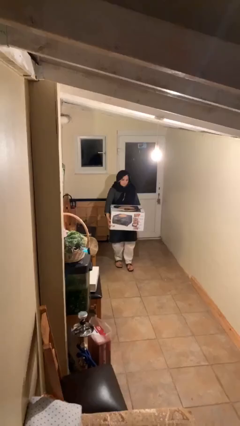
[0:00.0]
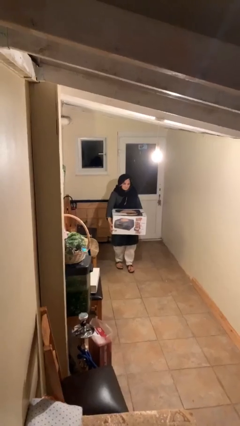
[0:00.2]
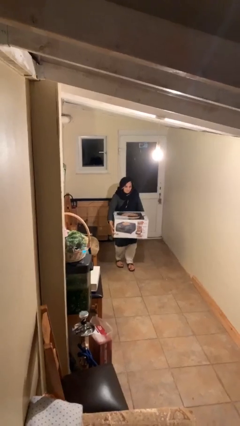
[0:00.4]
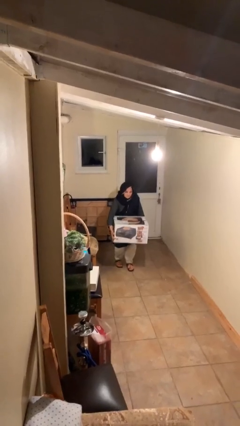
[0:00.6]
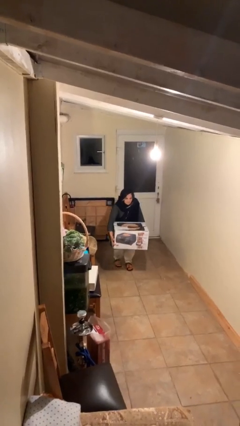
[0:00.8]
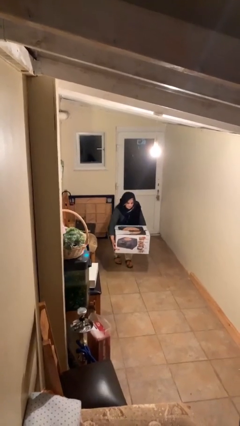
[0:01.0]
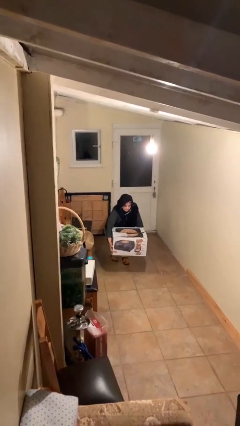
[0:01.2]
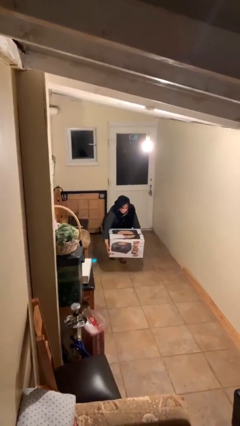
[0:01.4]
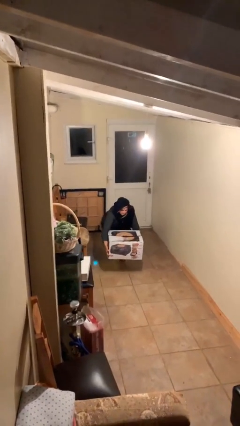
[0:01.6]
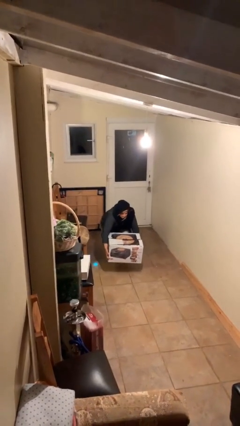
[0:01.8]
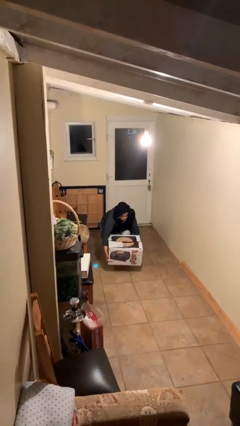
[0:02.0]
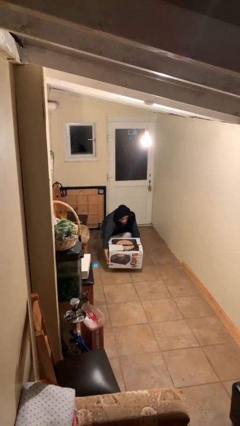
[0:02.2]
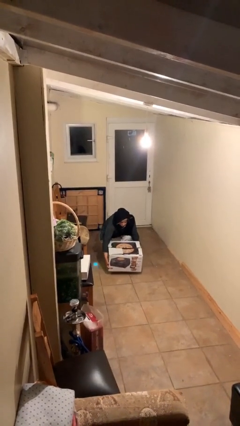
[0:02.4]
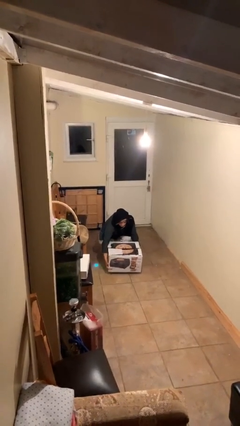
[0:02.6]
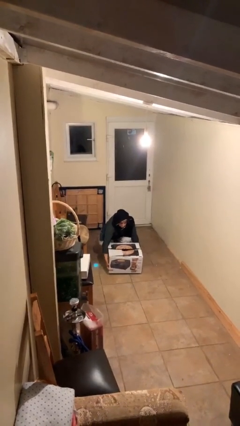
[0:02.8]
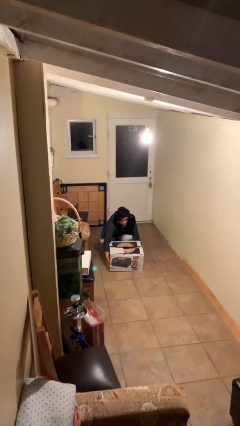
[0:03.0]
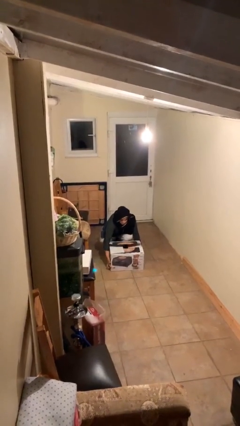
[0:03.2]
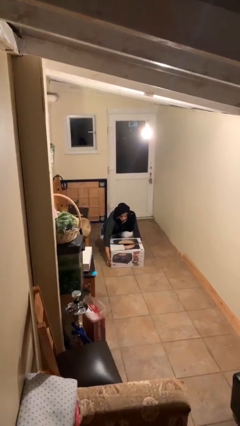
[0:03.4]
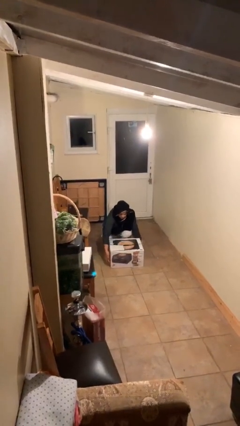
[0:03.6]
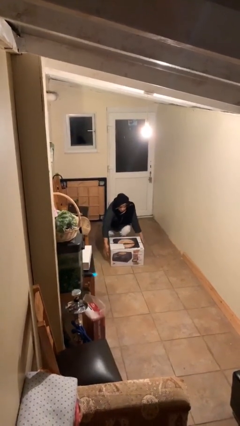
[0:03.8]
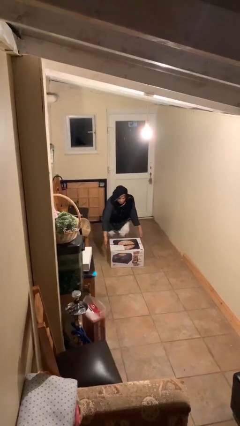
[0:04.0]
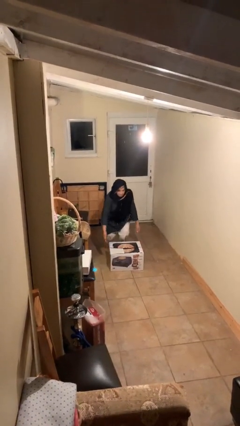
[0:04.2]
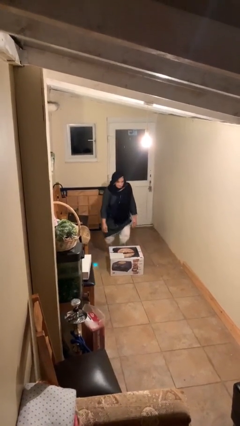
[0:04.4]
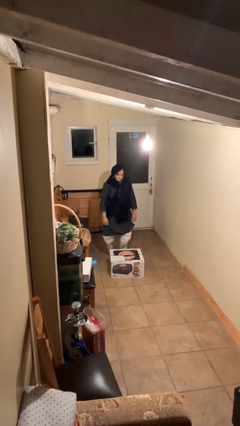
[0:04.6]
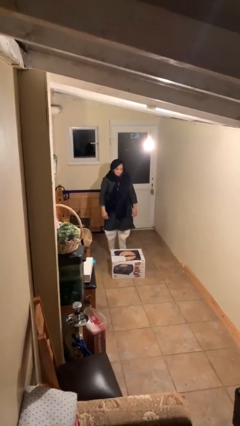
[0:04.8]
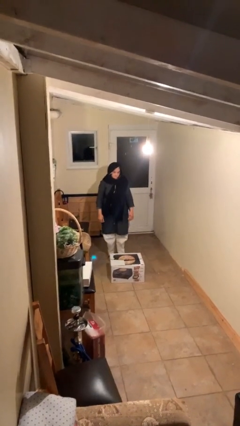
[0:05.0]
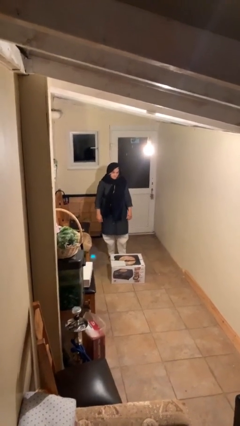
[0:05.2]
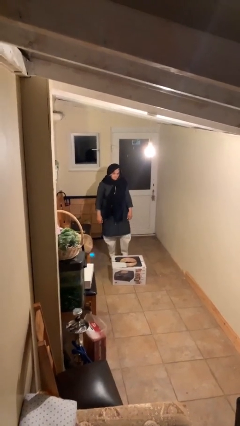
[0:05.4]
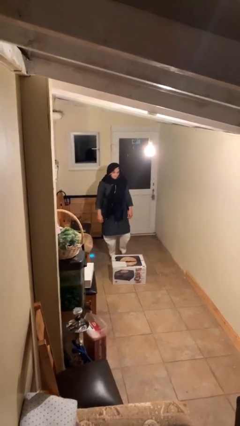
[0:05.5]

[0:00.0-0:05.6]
person puts down object on floor

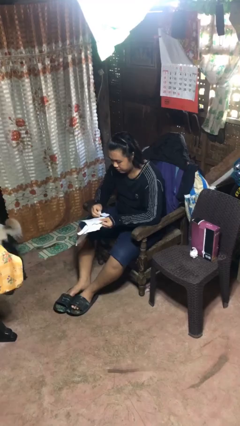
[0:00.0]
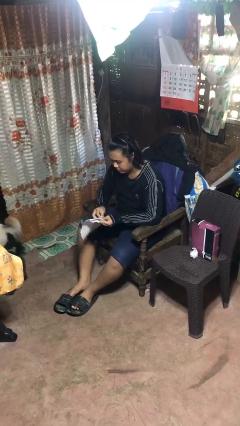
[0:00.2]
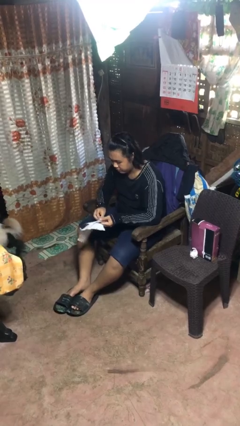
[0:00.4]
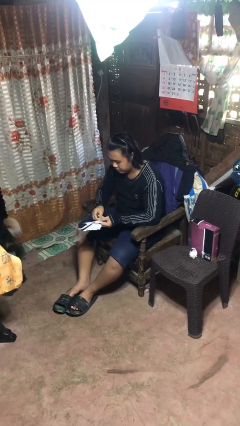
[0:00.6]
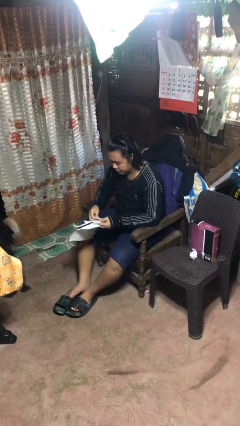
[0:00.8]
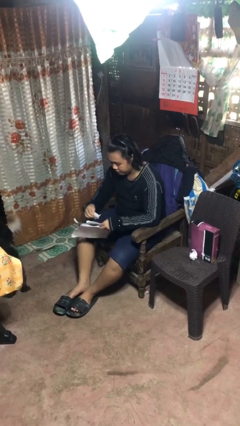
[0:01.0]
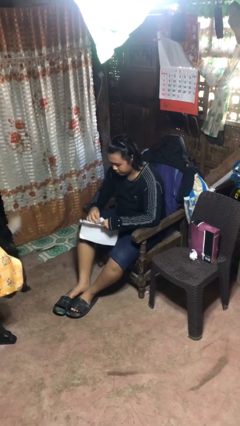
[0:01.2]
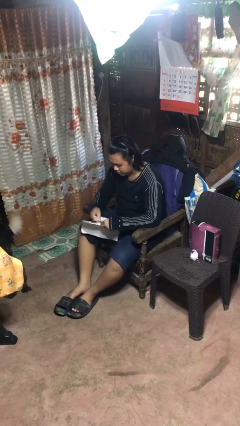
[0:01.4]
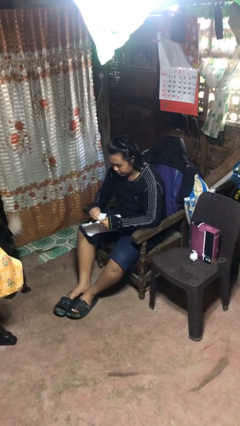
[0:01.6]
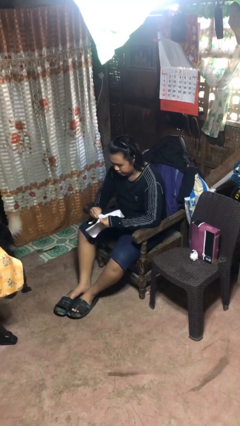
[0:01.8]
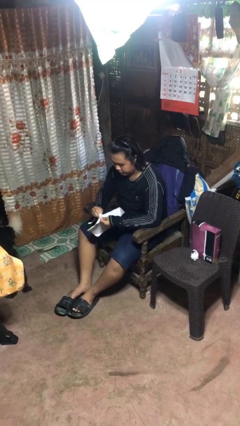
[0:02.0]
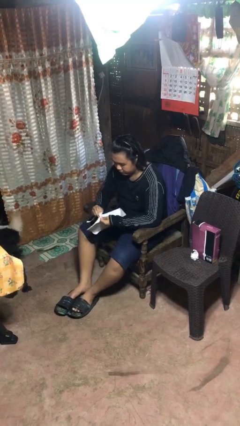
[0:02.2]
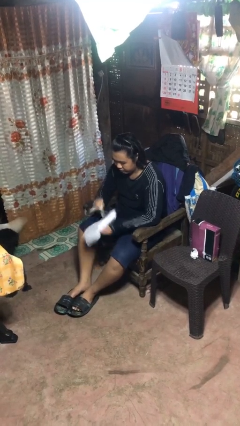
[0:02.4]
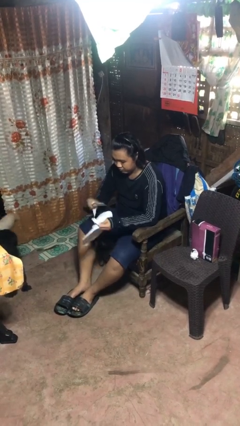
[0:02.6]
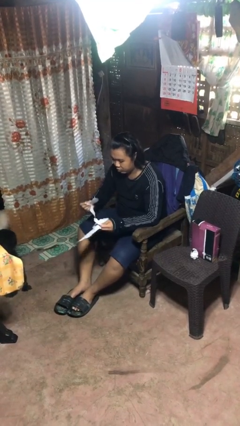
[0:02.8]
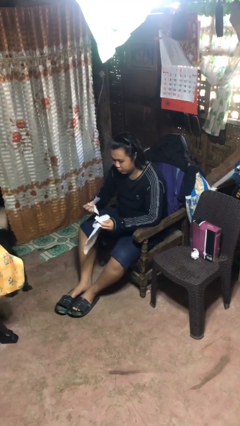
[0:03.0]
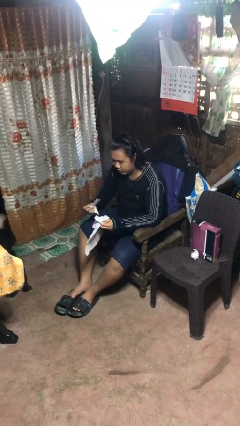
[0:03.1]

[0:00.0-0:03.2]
person tears paper

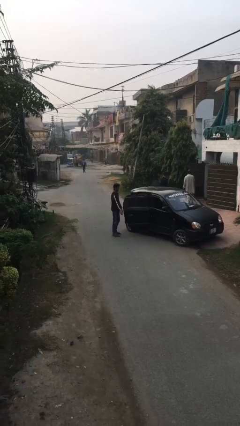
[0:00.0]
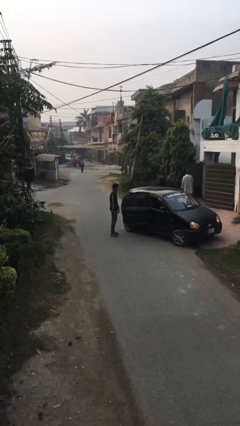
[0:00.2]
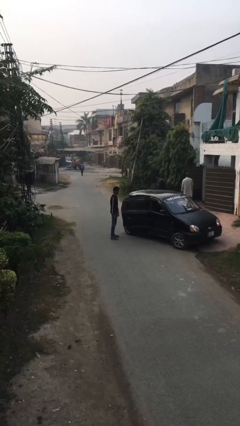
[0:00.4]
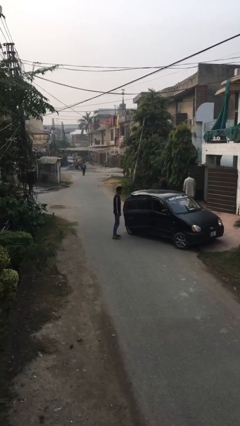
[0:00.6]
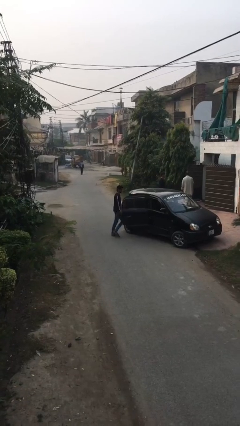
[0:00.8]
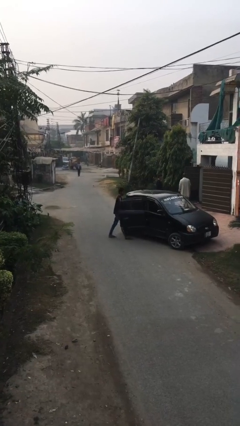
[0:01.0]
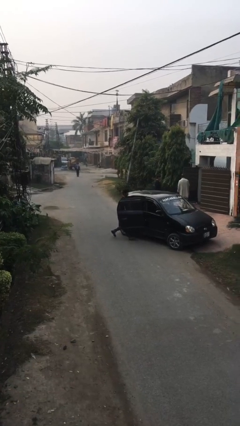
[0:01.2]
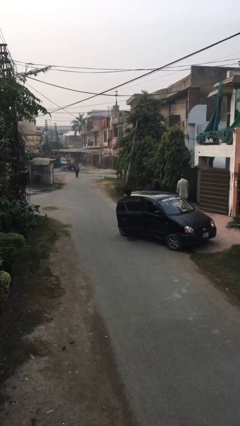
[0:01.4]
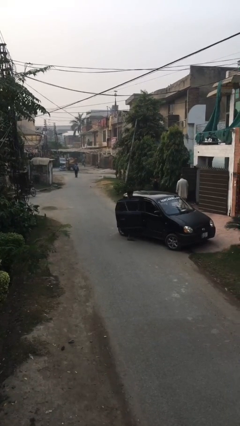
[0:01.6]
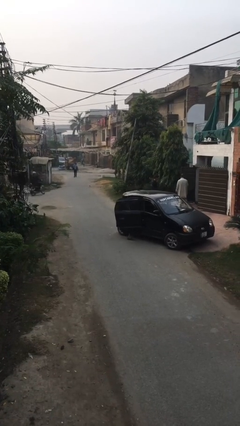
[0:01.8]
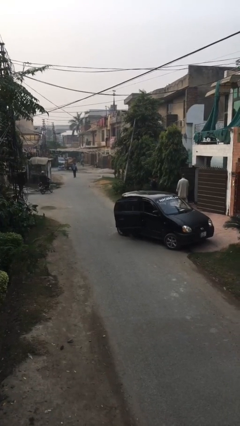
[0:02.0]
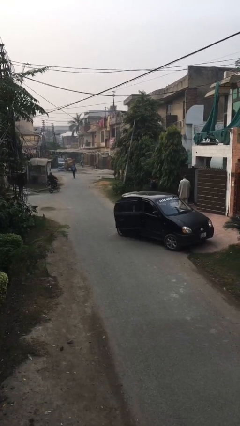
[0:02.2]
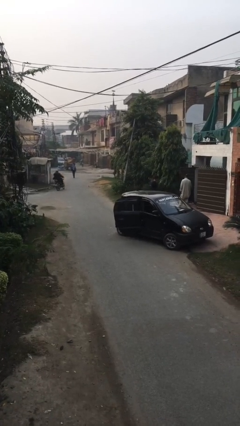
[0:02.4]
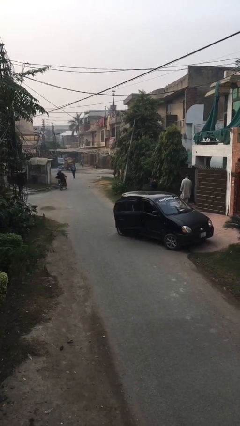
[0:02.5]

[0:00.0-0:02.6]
person enters car

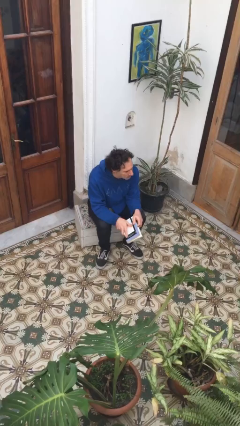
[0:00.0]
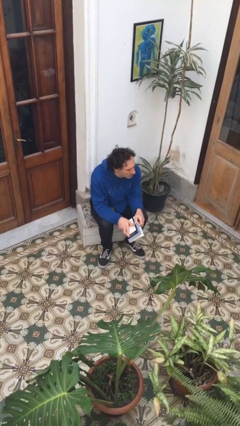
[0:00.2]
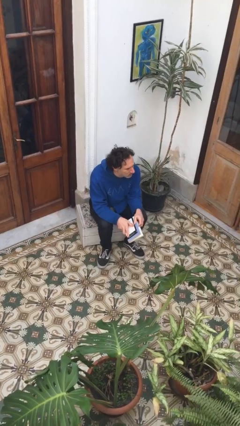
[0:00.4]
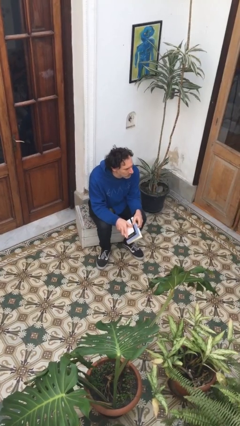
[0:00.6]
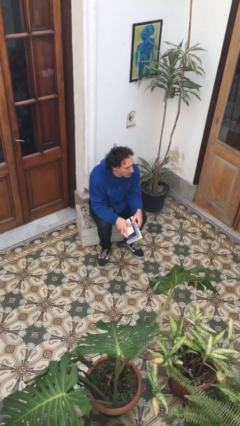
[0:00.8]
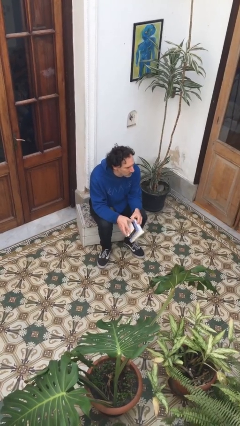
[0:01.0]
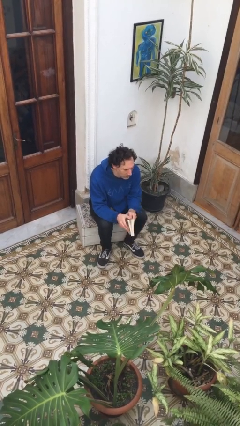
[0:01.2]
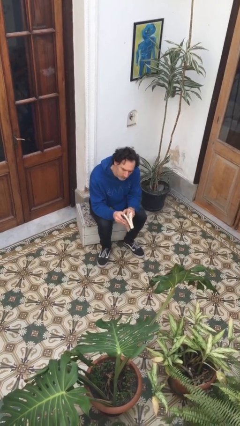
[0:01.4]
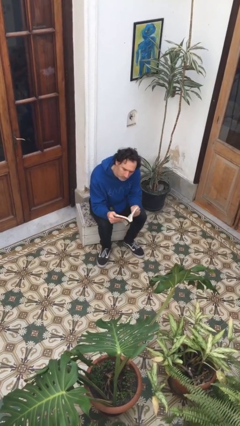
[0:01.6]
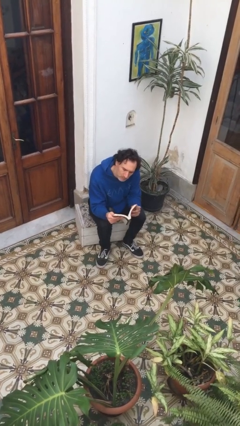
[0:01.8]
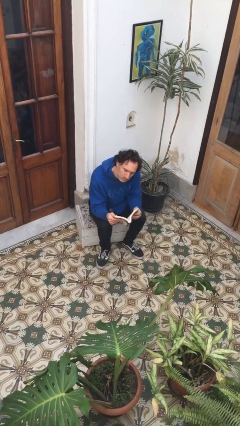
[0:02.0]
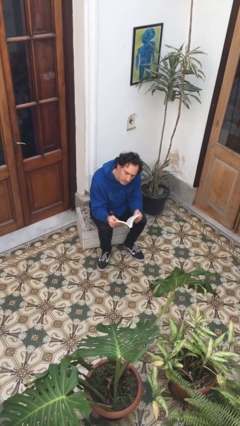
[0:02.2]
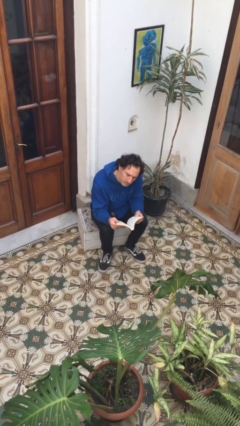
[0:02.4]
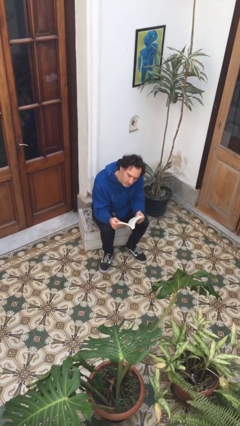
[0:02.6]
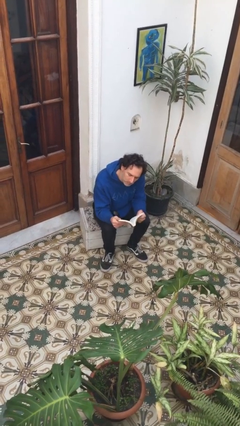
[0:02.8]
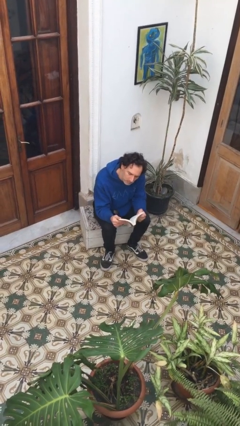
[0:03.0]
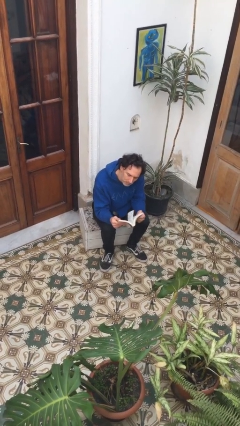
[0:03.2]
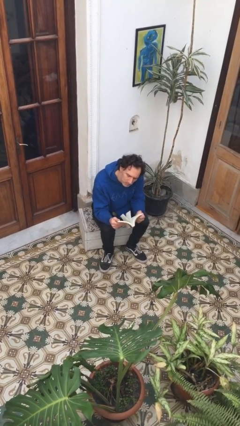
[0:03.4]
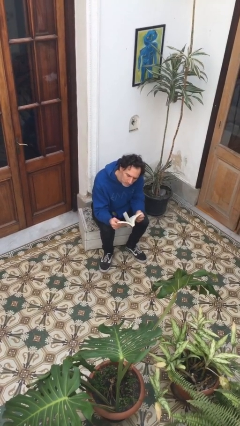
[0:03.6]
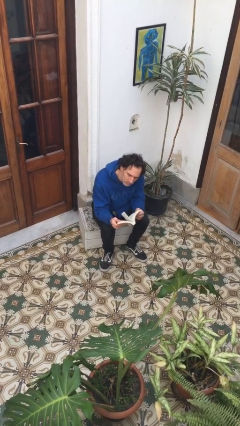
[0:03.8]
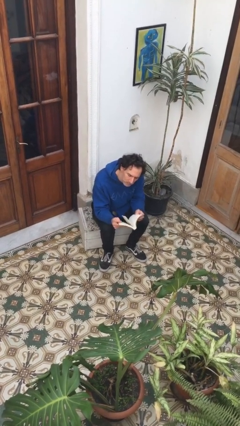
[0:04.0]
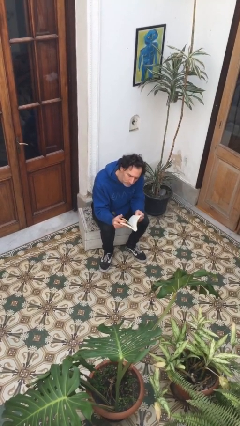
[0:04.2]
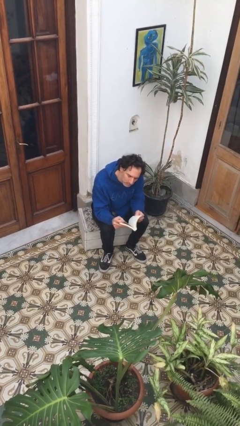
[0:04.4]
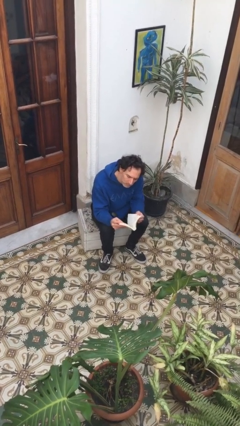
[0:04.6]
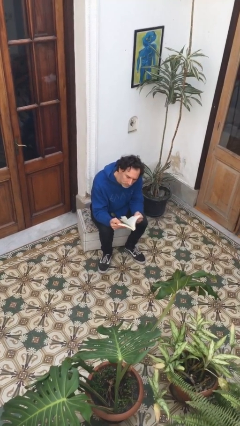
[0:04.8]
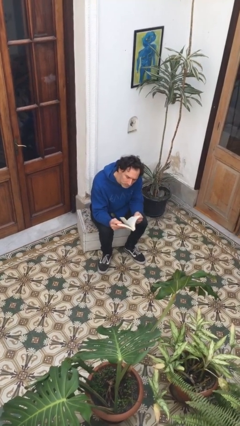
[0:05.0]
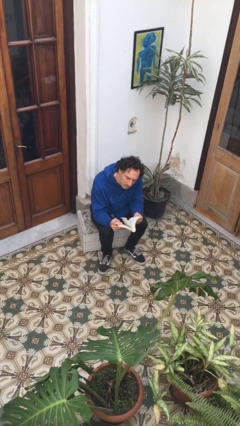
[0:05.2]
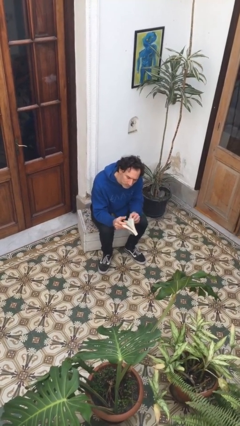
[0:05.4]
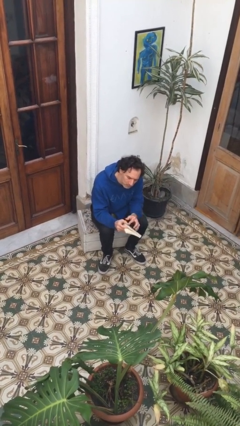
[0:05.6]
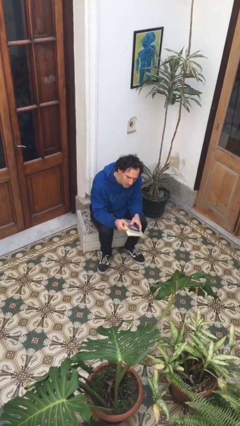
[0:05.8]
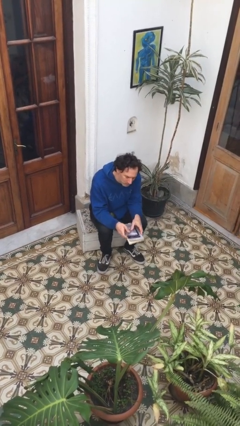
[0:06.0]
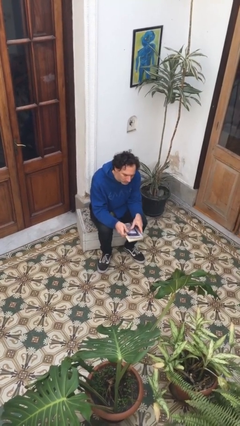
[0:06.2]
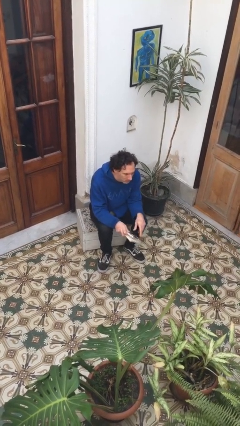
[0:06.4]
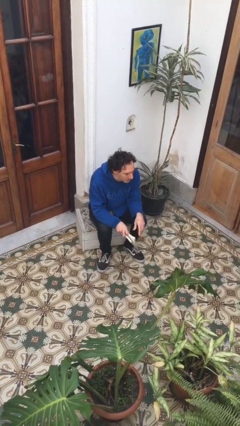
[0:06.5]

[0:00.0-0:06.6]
person reads book

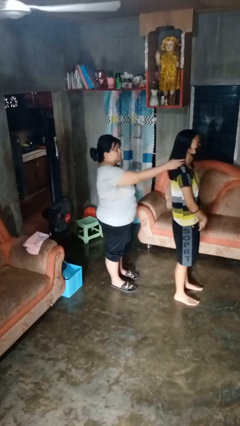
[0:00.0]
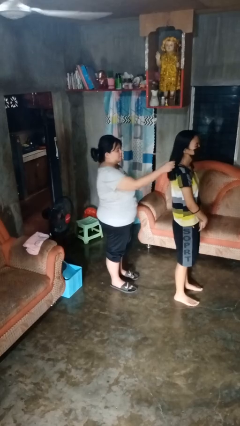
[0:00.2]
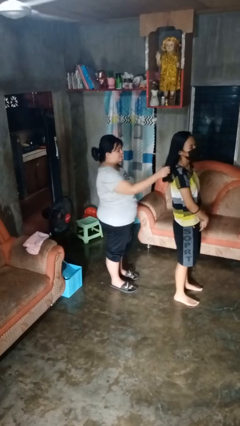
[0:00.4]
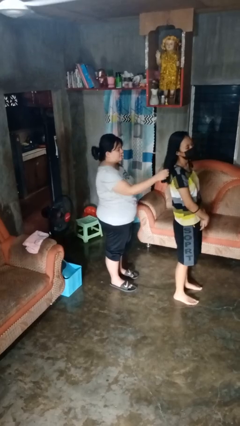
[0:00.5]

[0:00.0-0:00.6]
person grabs person by hair
